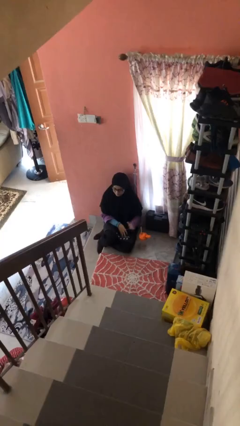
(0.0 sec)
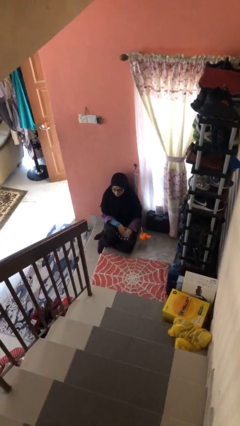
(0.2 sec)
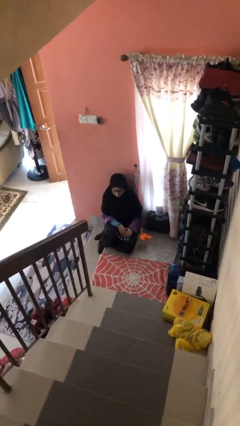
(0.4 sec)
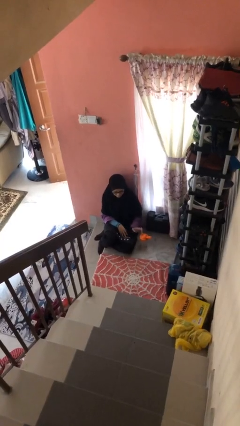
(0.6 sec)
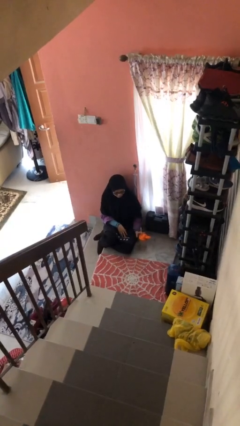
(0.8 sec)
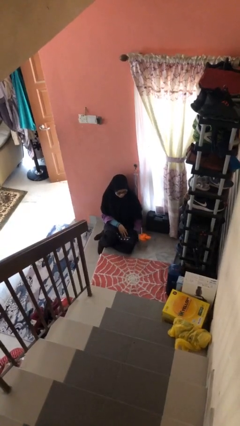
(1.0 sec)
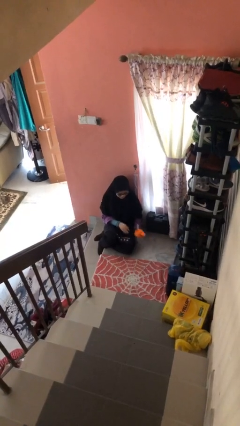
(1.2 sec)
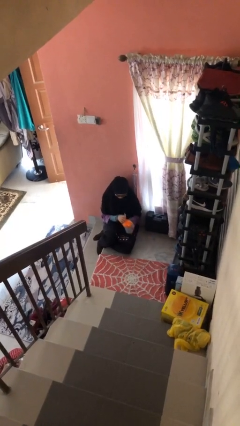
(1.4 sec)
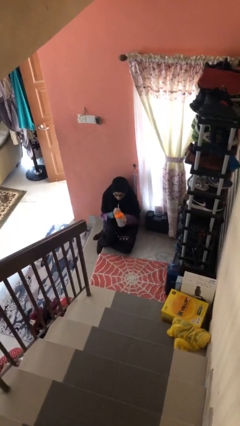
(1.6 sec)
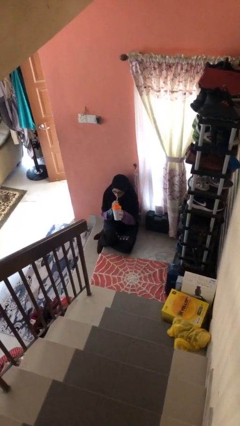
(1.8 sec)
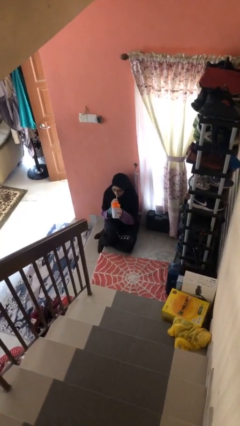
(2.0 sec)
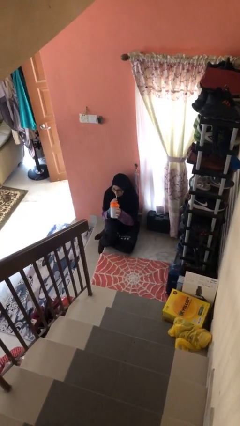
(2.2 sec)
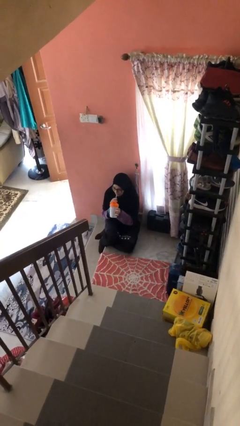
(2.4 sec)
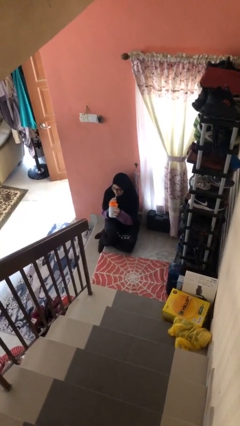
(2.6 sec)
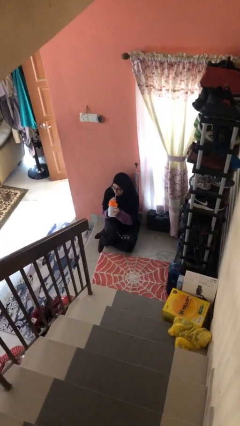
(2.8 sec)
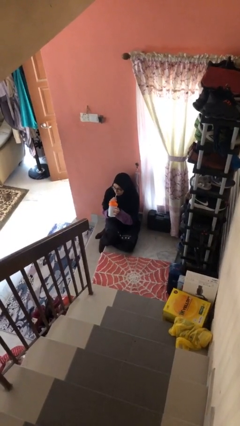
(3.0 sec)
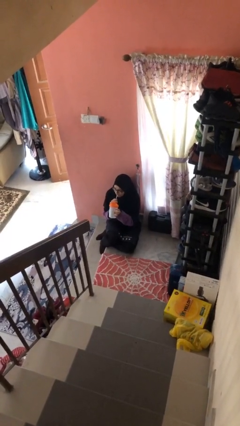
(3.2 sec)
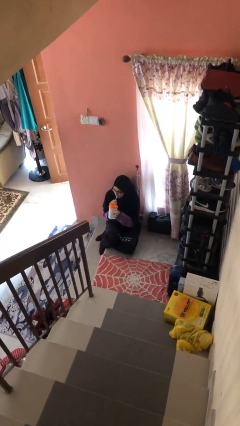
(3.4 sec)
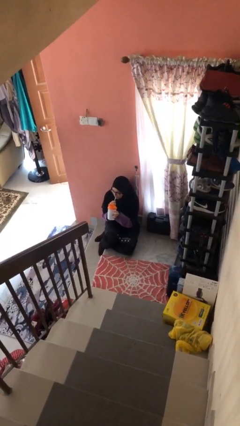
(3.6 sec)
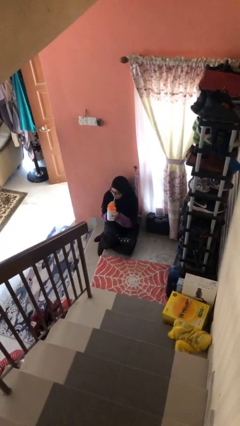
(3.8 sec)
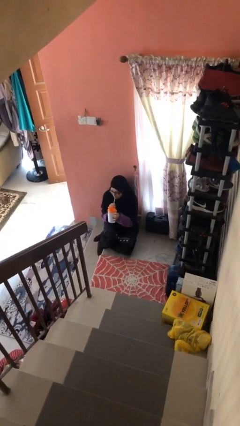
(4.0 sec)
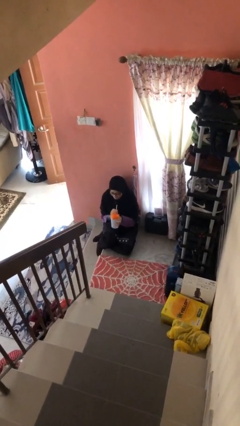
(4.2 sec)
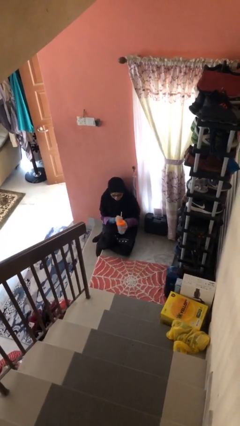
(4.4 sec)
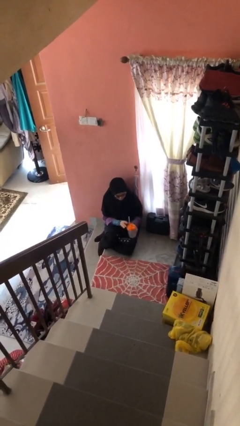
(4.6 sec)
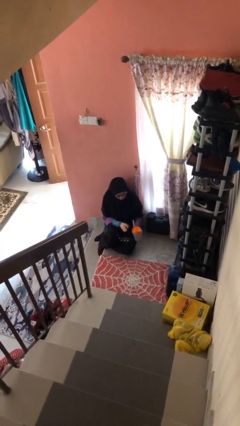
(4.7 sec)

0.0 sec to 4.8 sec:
person drinks from straw

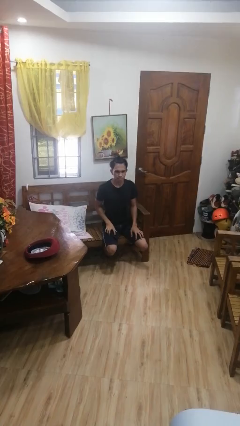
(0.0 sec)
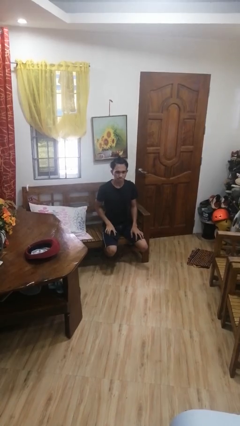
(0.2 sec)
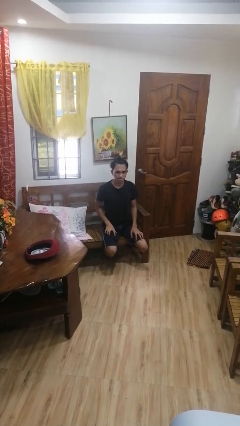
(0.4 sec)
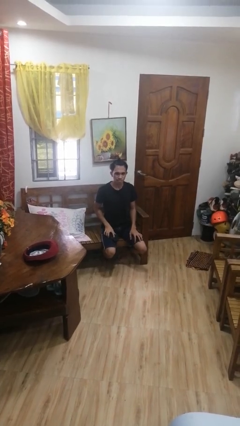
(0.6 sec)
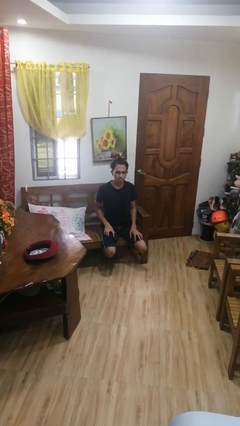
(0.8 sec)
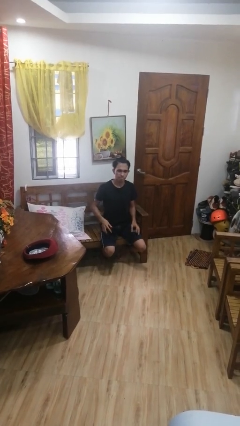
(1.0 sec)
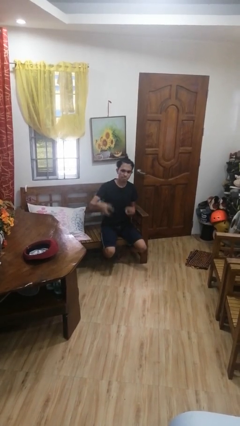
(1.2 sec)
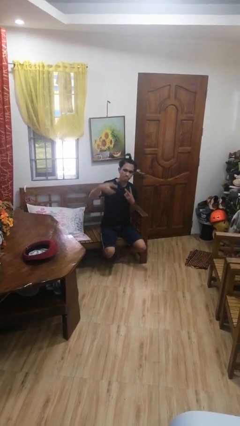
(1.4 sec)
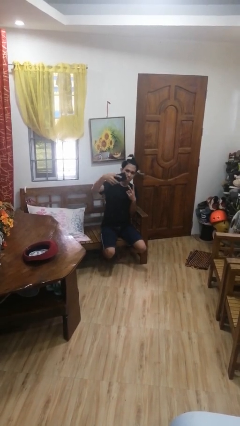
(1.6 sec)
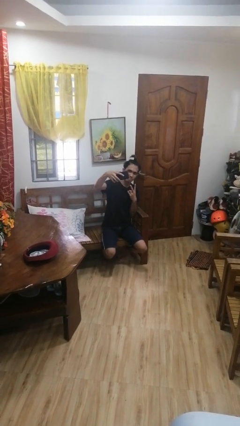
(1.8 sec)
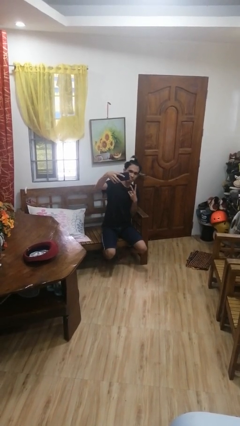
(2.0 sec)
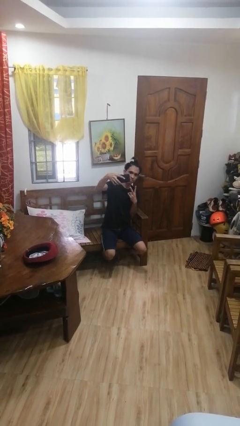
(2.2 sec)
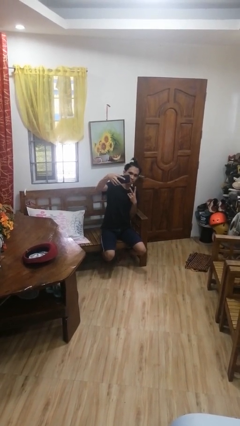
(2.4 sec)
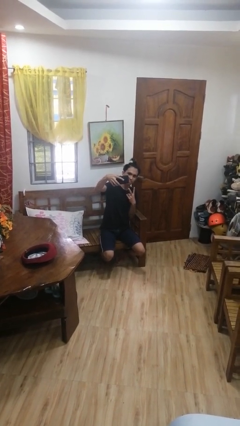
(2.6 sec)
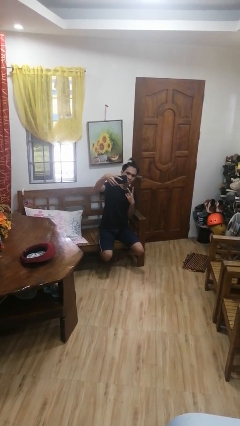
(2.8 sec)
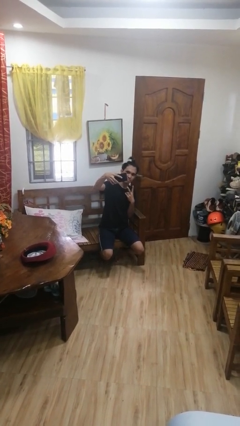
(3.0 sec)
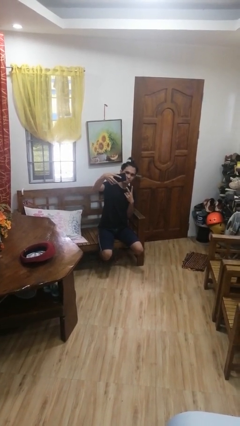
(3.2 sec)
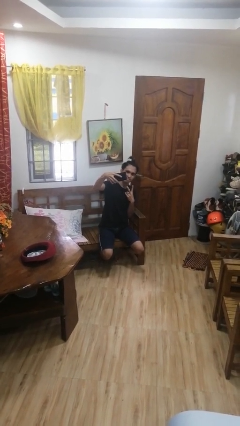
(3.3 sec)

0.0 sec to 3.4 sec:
person takes selfie

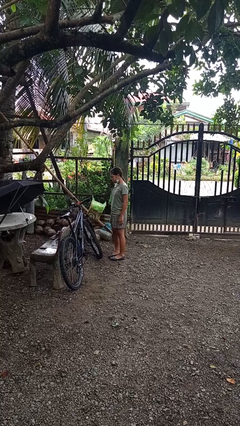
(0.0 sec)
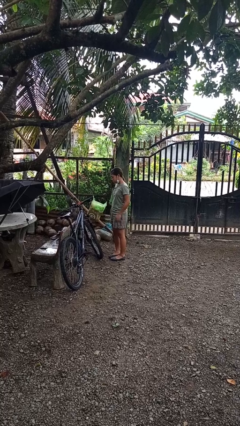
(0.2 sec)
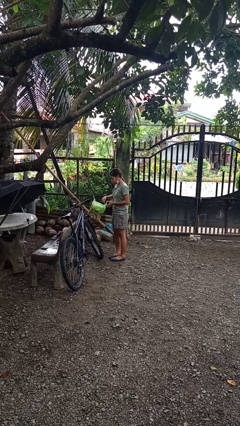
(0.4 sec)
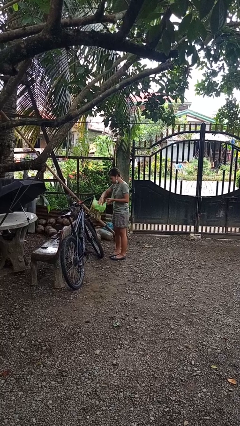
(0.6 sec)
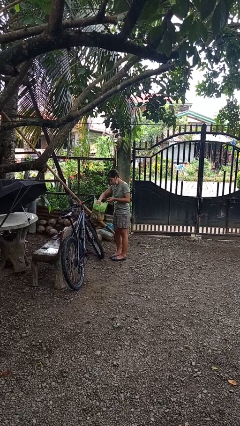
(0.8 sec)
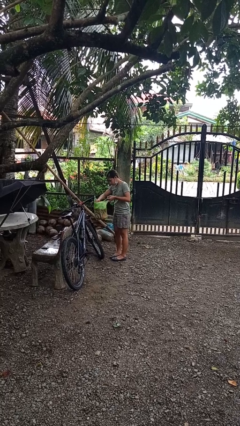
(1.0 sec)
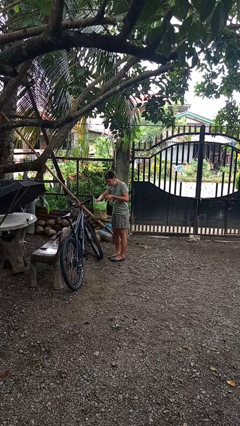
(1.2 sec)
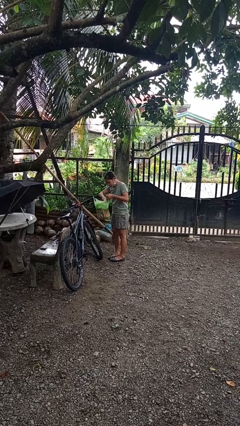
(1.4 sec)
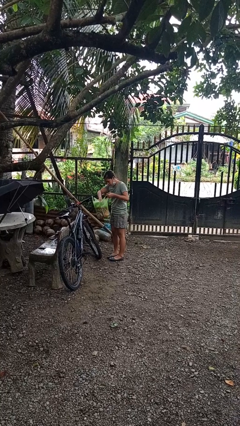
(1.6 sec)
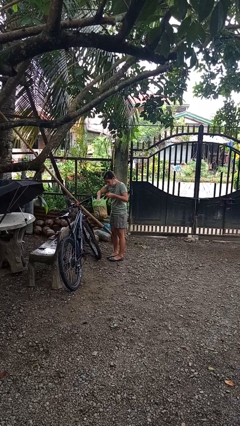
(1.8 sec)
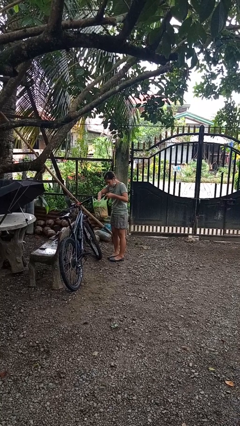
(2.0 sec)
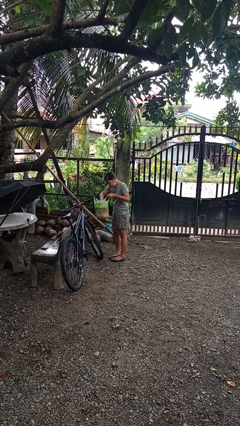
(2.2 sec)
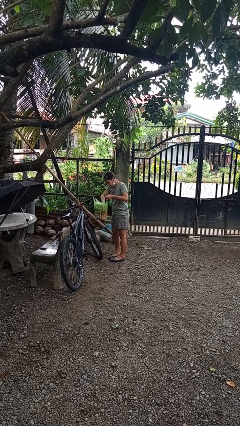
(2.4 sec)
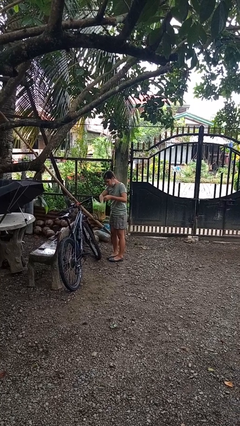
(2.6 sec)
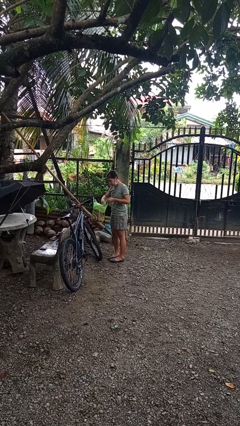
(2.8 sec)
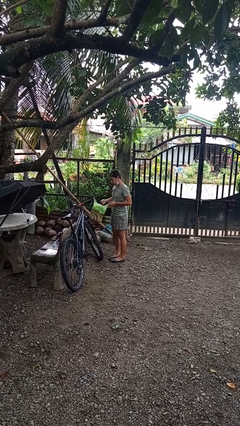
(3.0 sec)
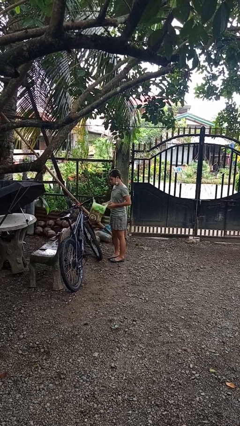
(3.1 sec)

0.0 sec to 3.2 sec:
person searches in bag

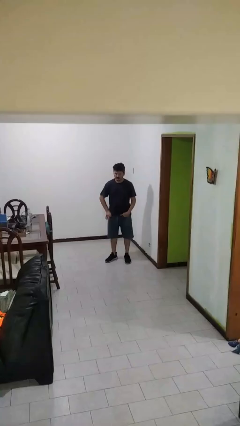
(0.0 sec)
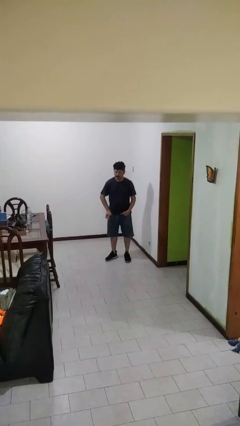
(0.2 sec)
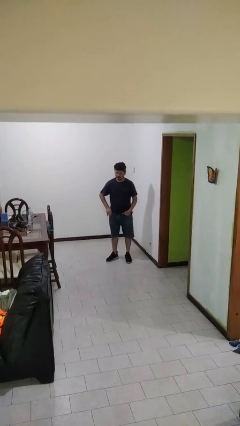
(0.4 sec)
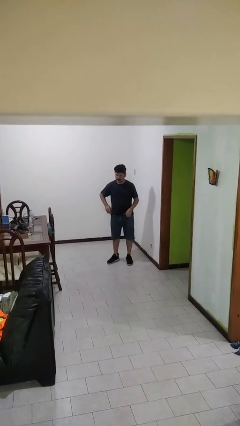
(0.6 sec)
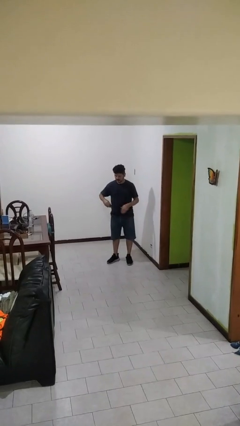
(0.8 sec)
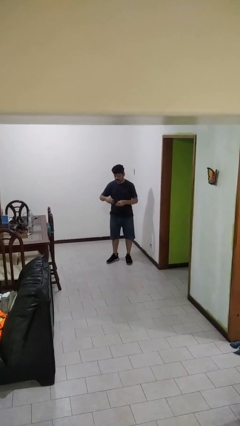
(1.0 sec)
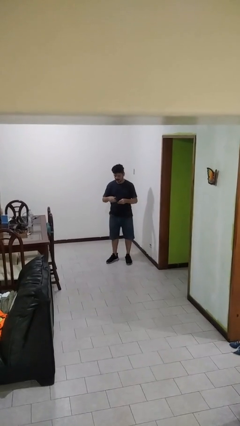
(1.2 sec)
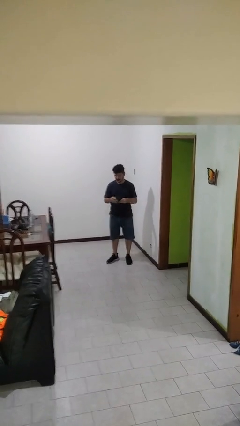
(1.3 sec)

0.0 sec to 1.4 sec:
person takes phone from pocket

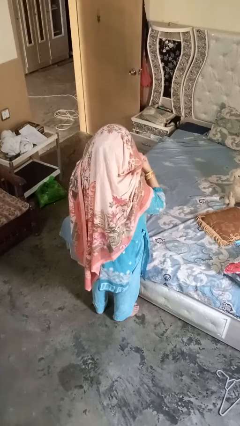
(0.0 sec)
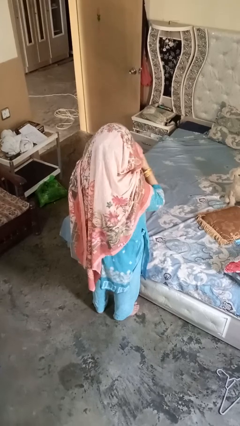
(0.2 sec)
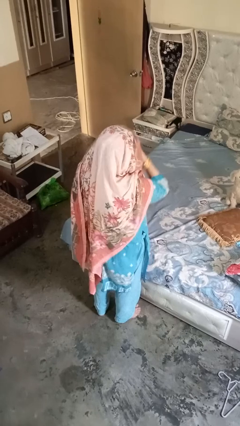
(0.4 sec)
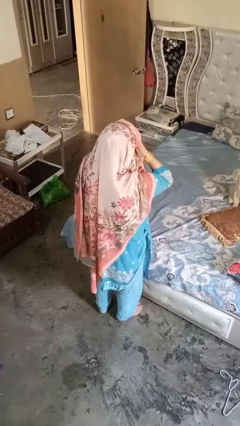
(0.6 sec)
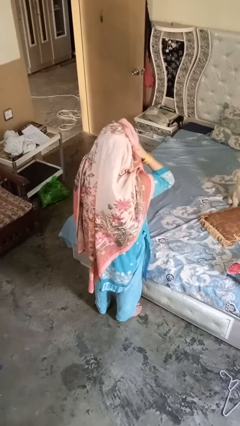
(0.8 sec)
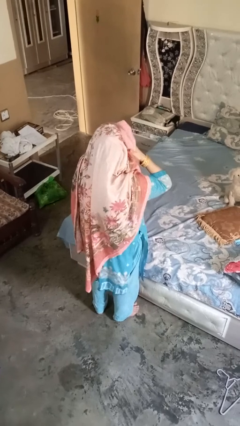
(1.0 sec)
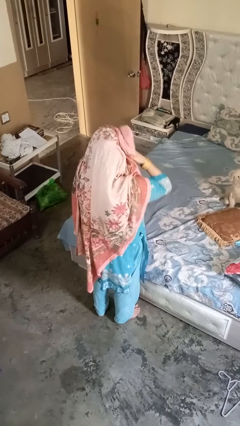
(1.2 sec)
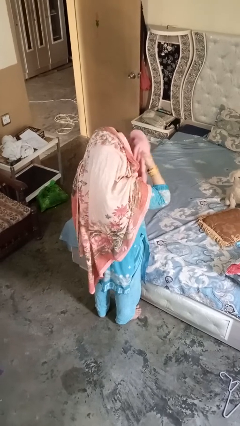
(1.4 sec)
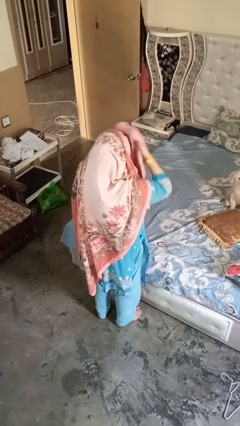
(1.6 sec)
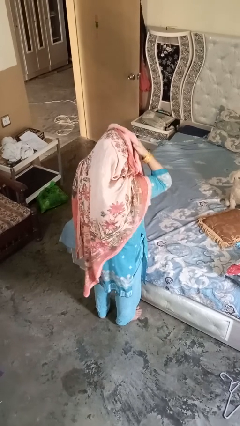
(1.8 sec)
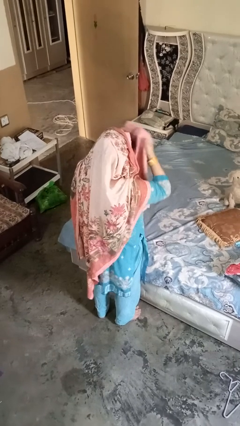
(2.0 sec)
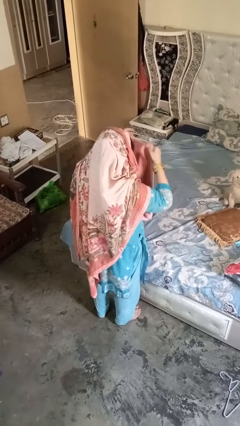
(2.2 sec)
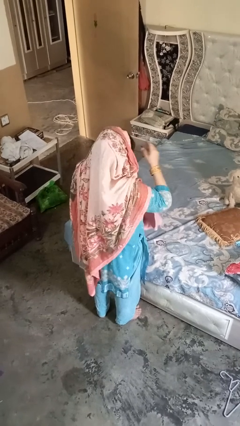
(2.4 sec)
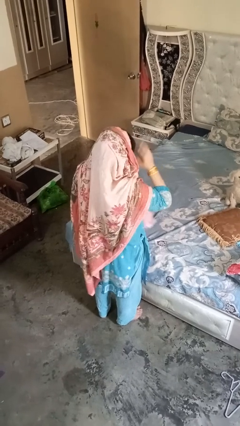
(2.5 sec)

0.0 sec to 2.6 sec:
person dries hair with towel

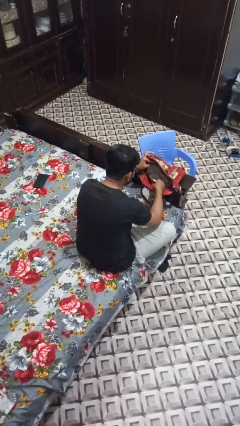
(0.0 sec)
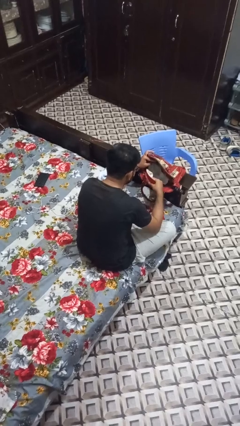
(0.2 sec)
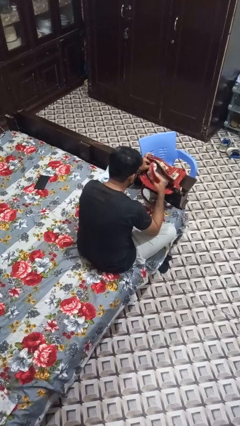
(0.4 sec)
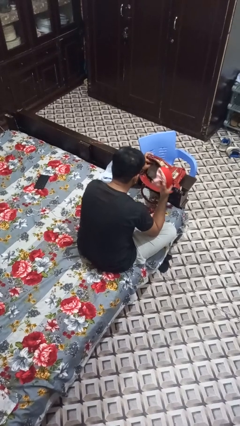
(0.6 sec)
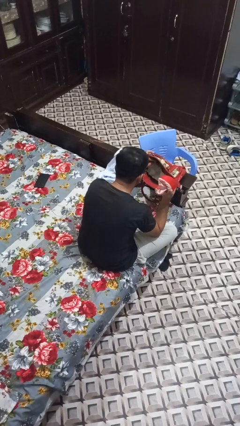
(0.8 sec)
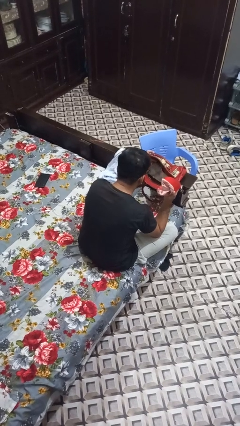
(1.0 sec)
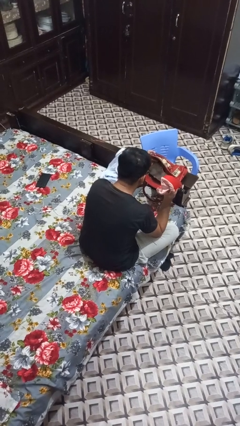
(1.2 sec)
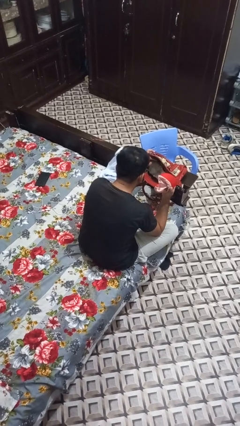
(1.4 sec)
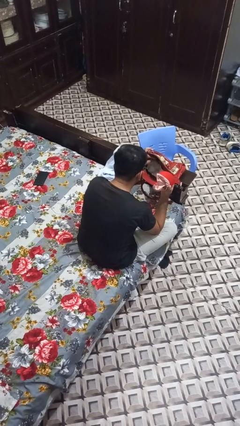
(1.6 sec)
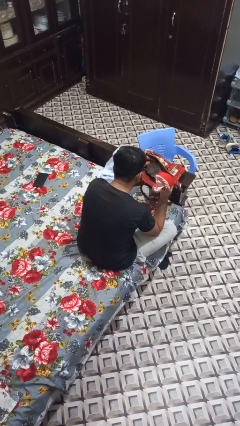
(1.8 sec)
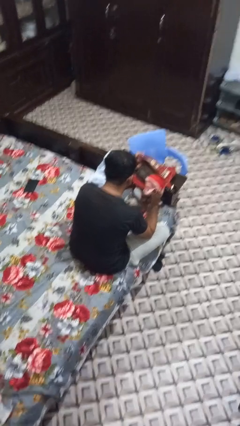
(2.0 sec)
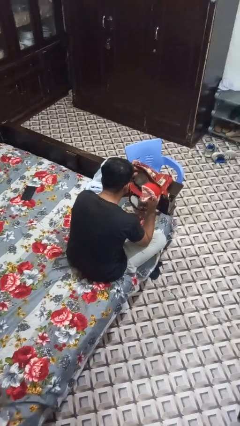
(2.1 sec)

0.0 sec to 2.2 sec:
person takes object from purse
